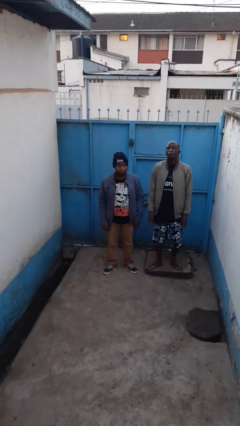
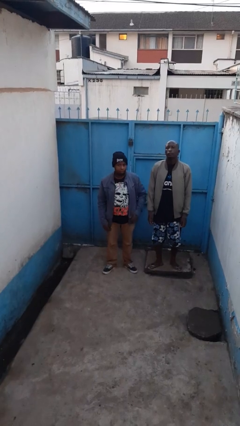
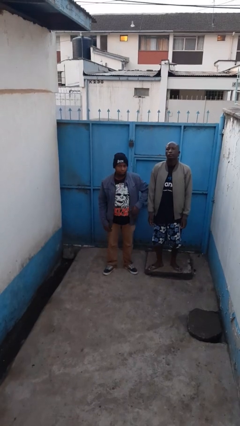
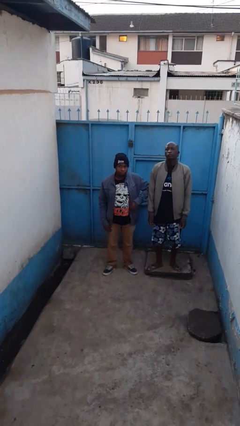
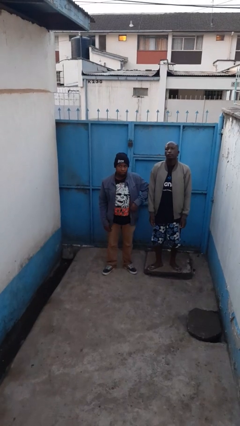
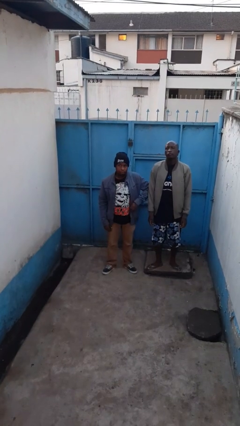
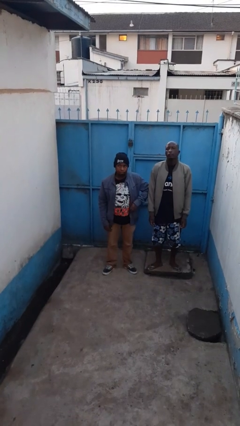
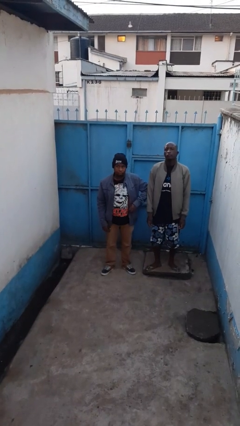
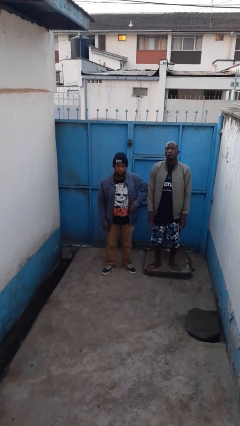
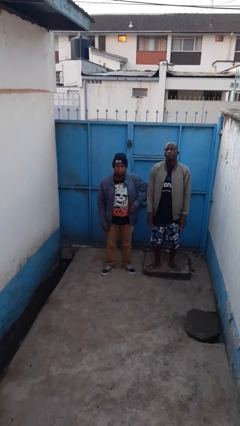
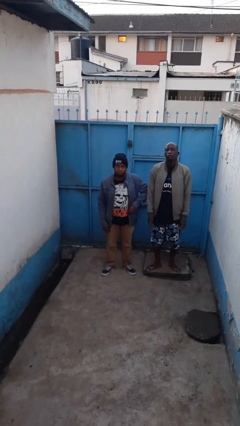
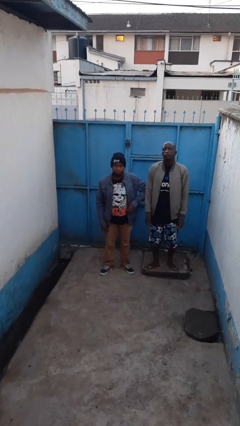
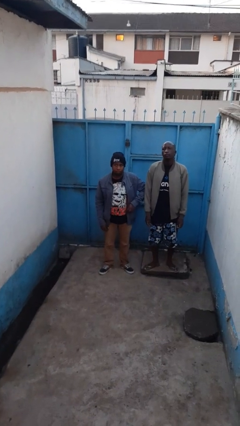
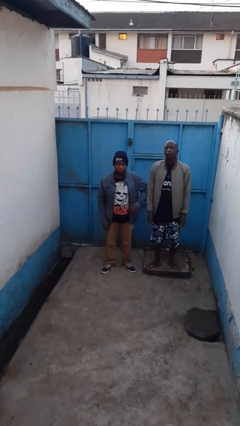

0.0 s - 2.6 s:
person nudges person with elbow

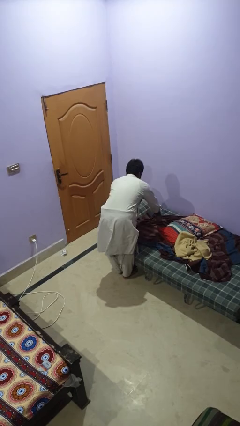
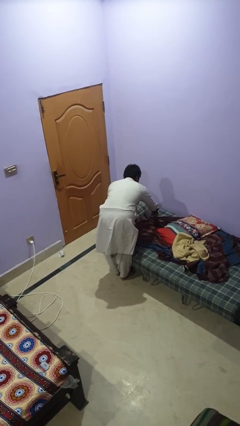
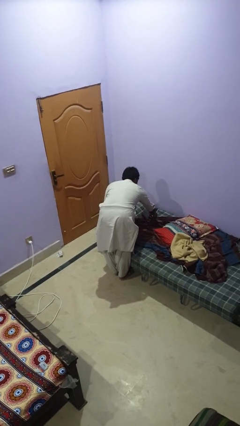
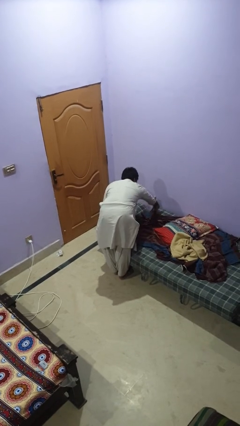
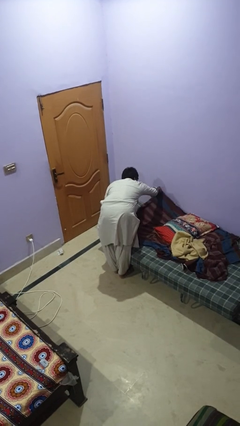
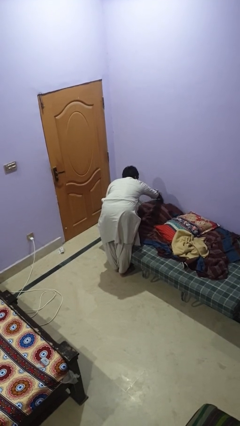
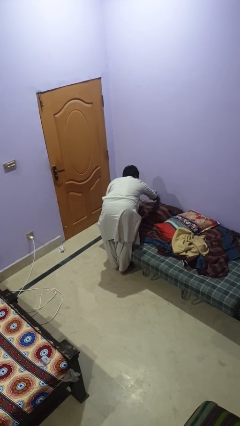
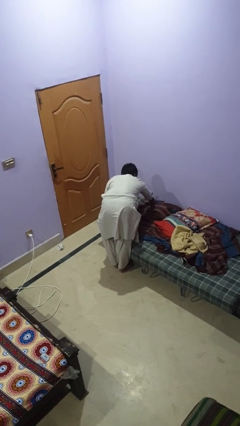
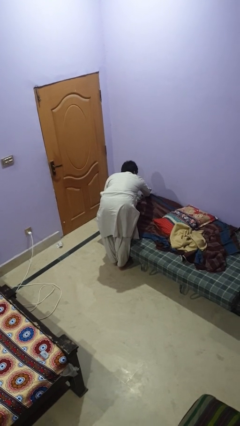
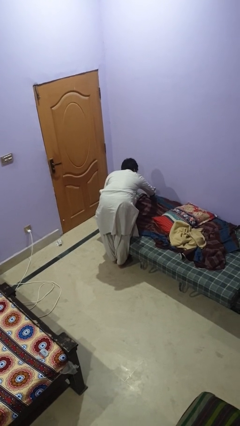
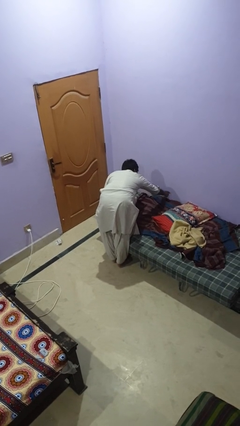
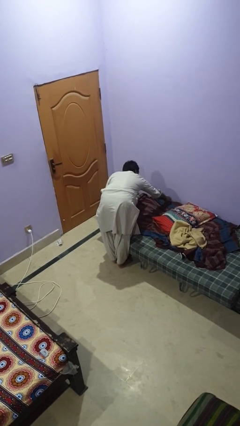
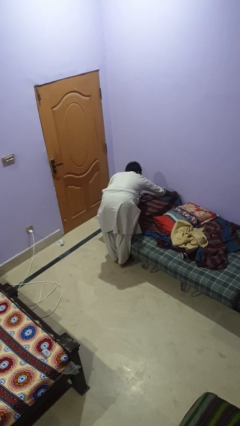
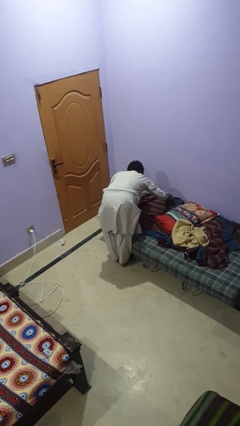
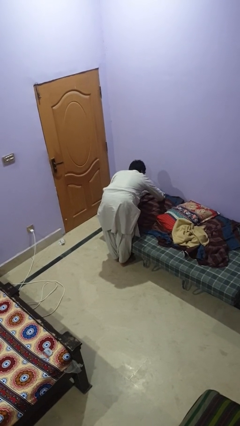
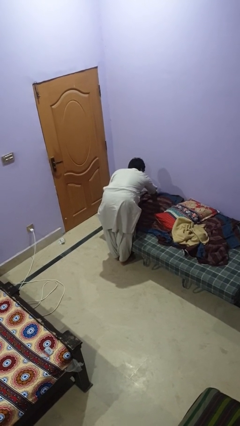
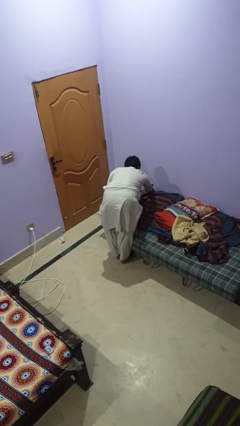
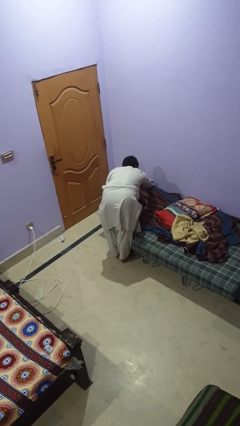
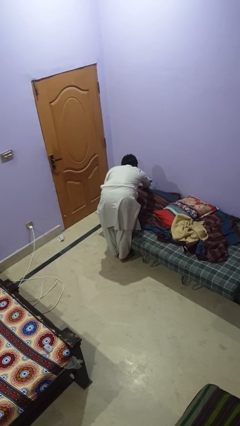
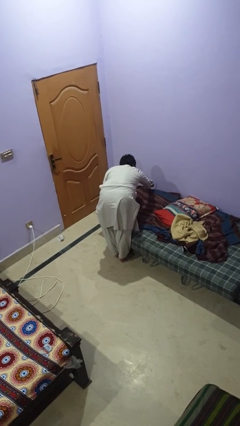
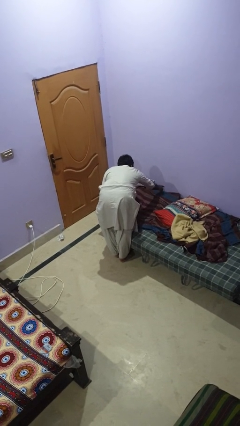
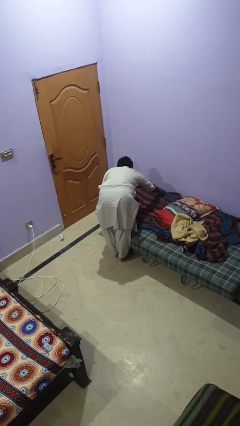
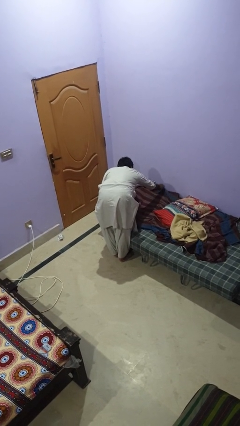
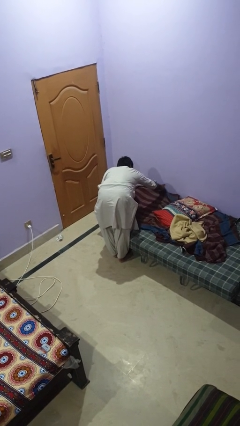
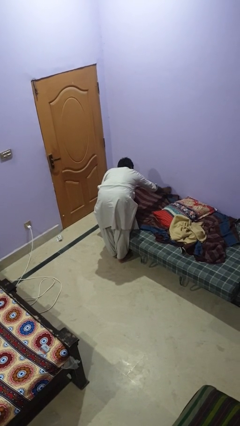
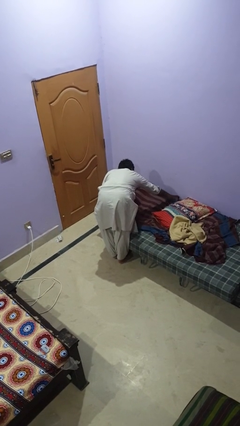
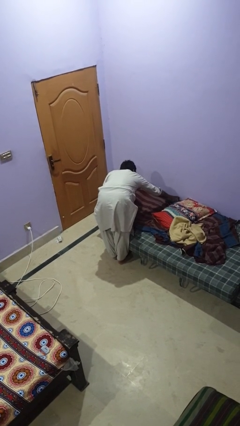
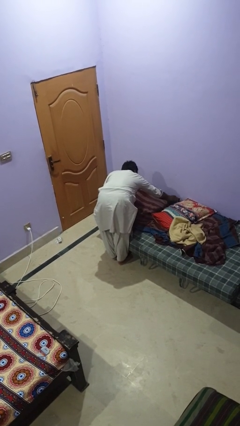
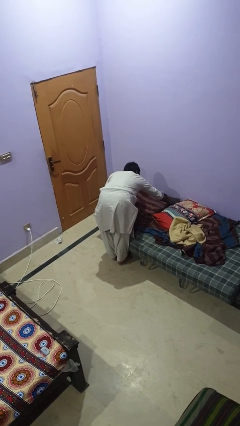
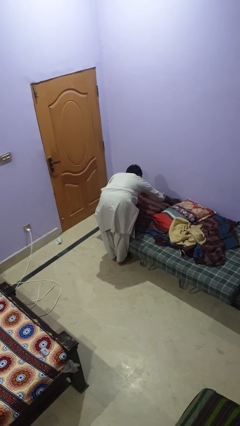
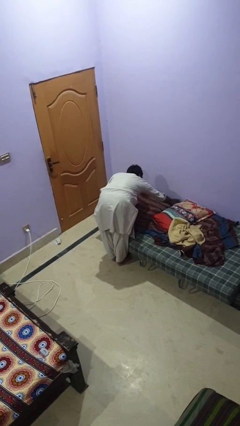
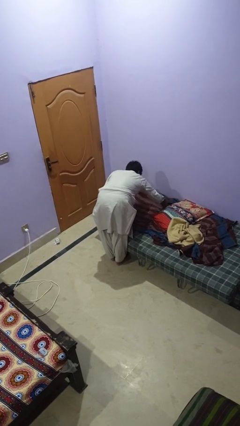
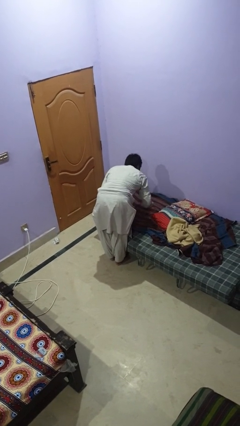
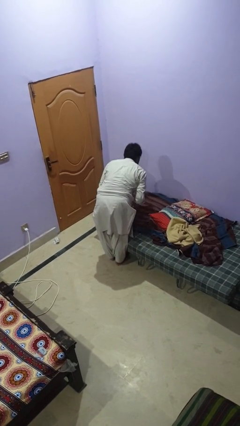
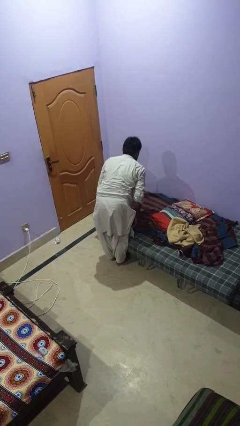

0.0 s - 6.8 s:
person makes bed

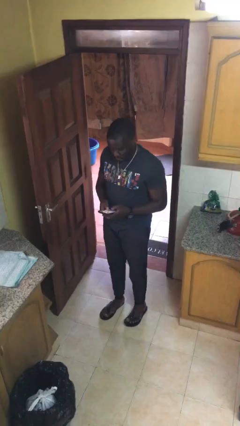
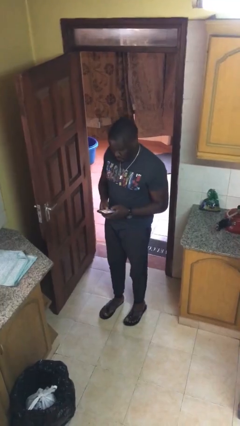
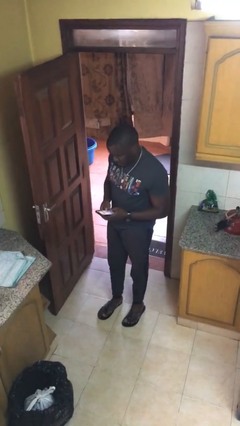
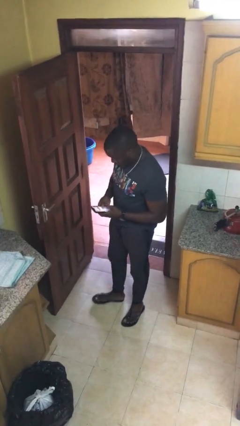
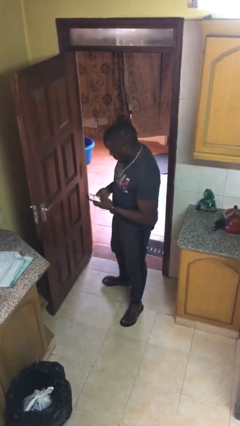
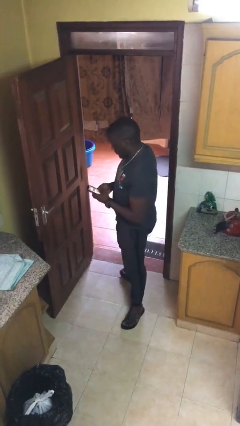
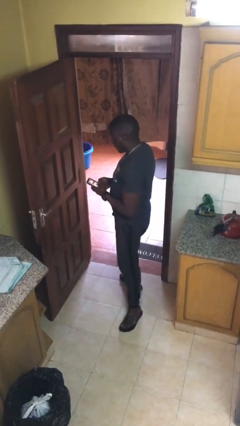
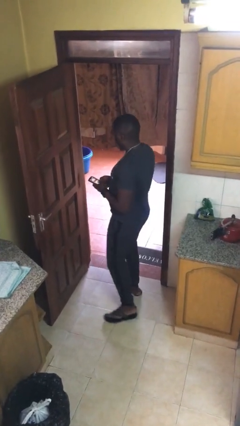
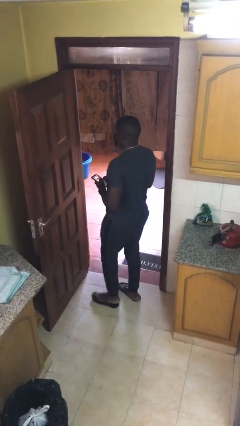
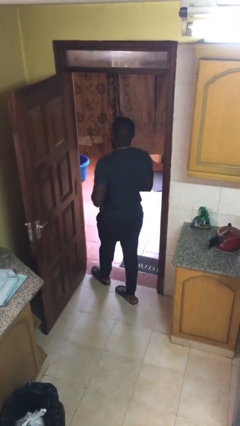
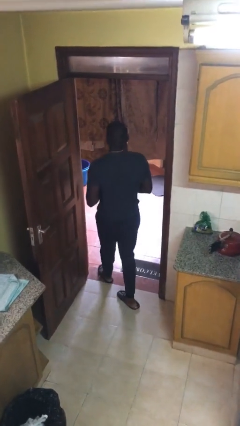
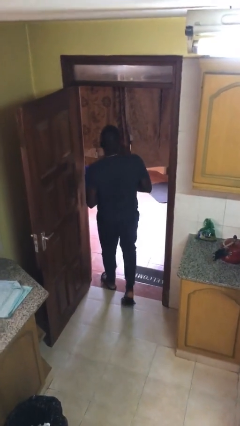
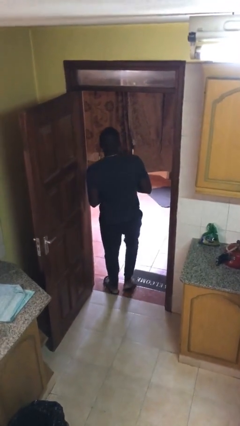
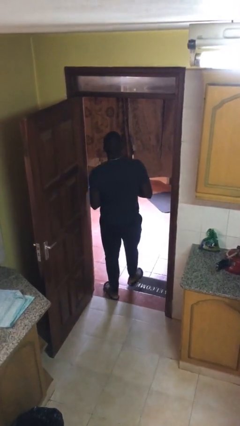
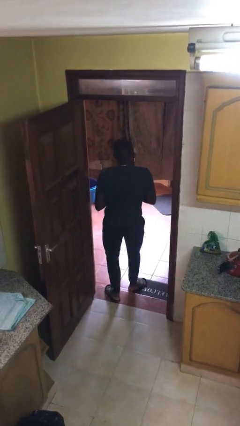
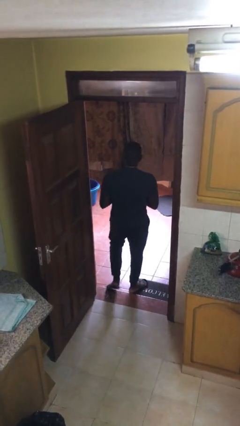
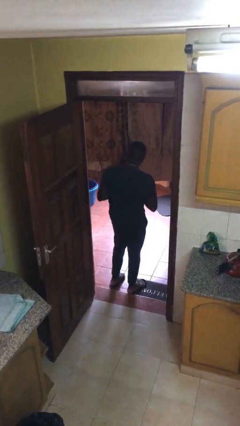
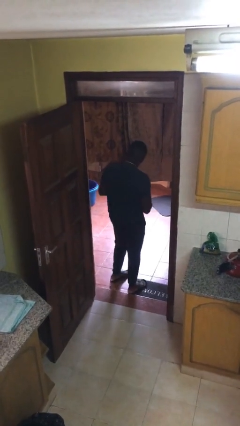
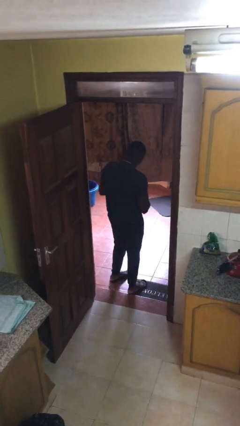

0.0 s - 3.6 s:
person exits scene through structure

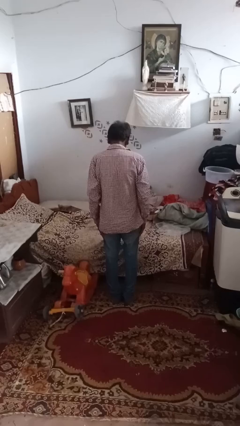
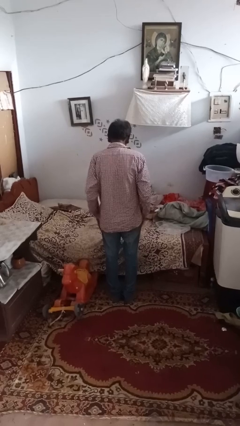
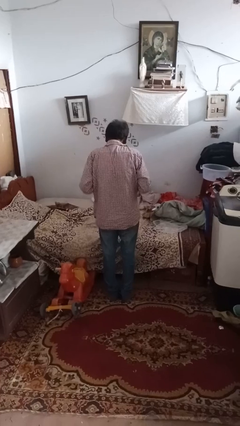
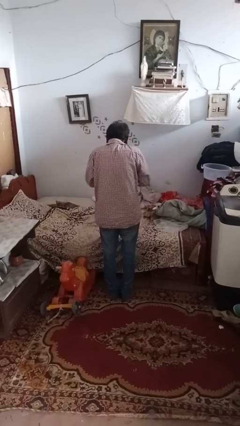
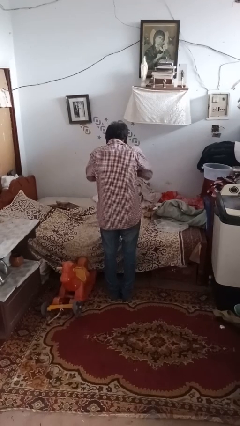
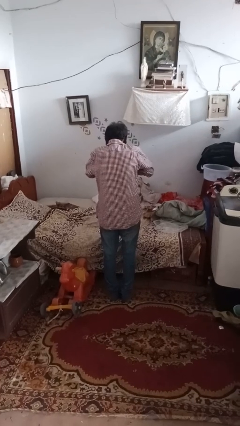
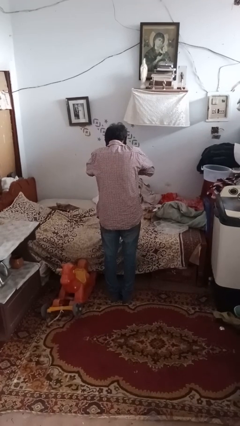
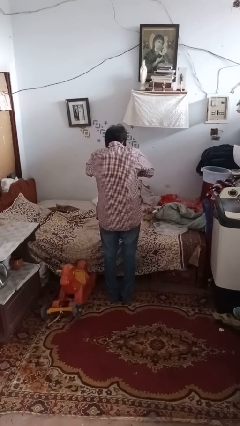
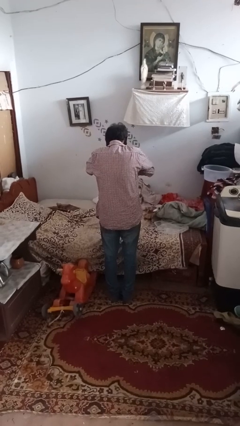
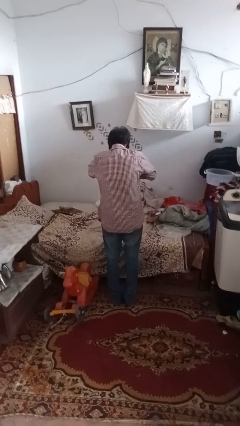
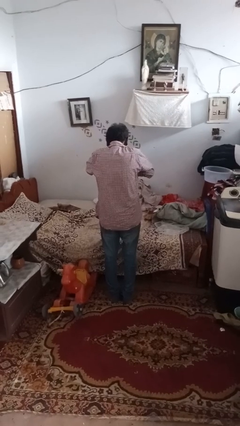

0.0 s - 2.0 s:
person sneezes into hand

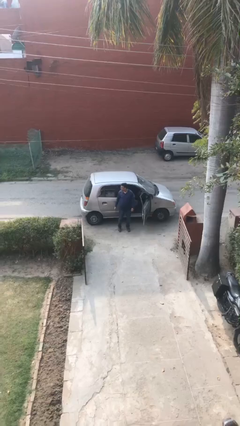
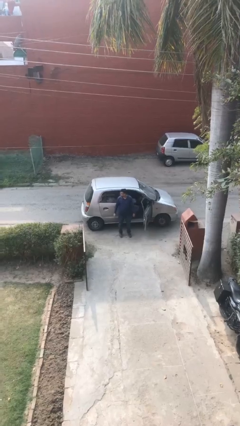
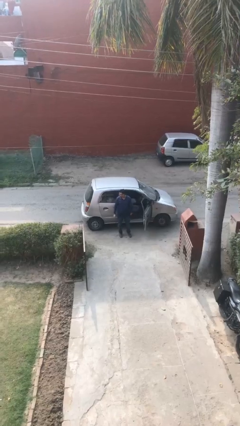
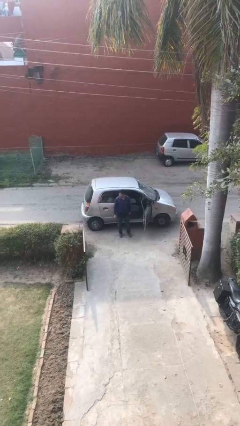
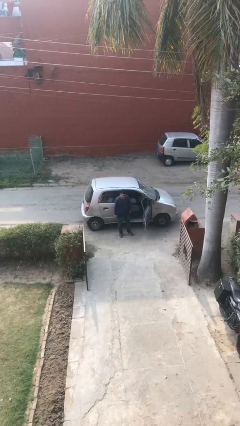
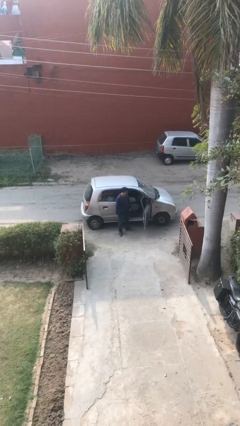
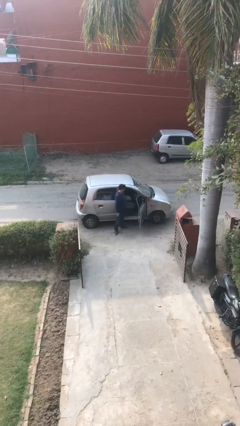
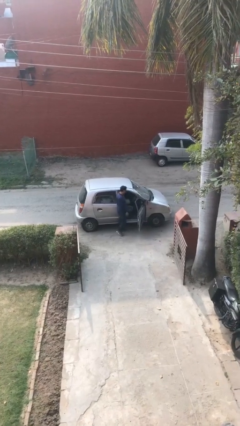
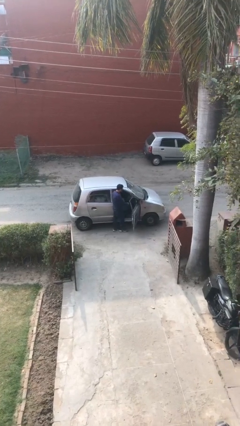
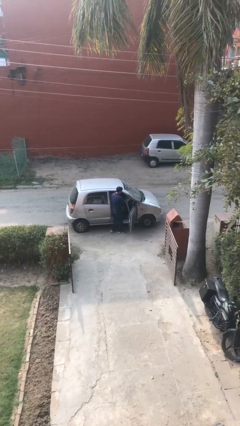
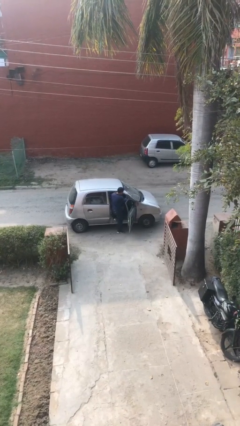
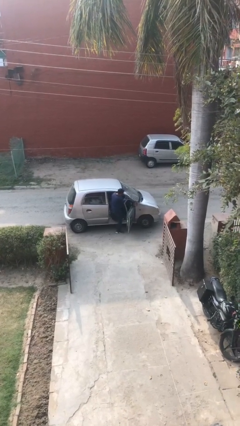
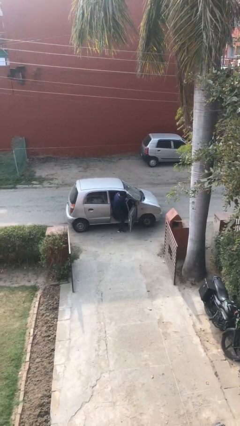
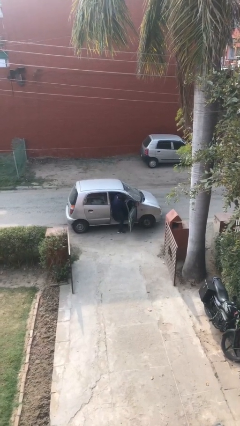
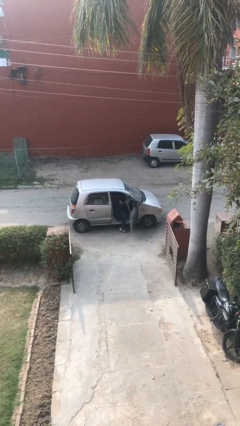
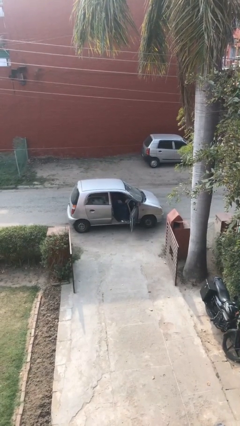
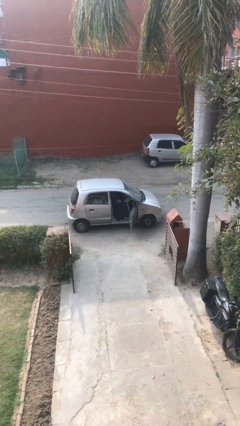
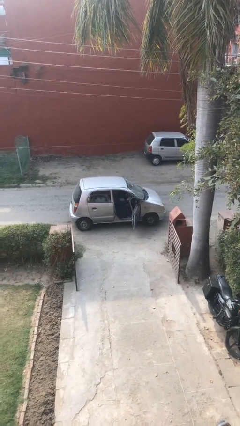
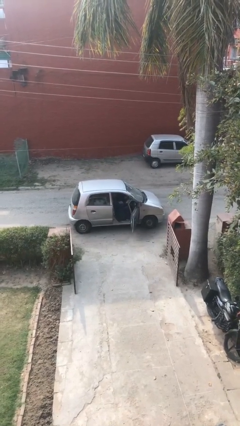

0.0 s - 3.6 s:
person enters car
